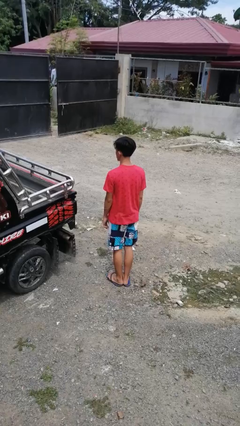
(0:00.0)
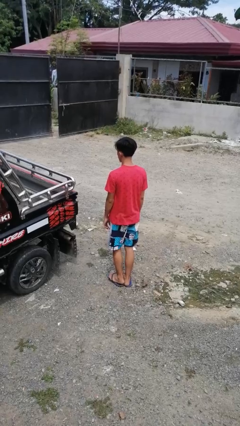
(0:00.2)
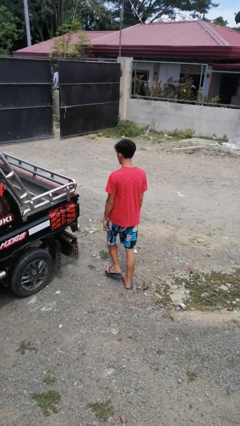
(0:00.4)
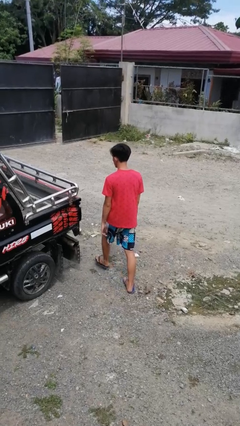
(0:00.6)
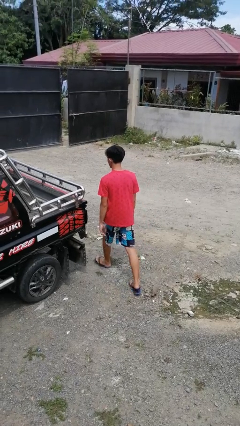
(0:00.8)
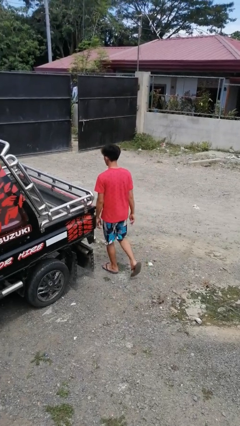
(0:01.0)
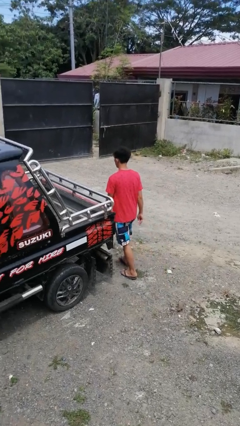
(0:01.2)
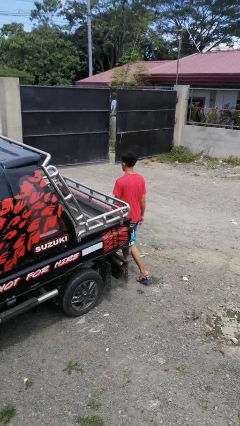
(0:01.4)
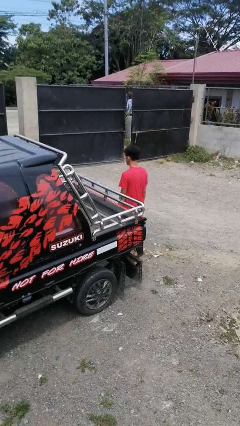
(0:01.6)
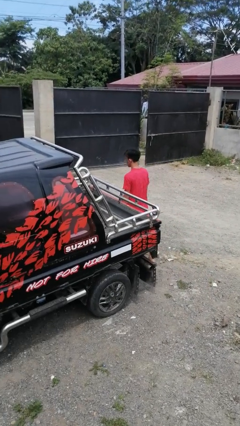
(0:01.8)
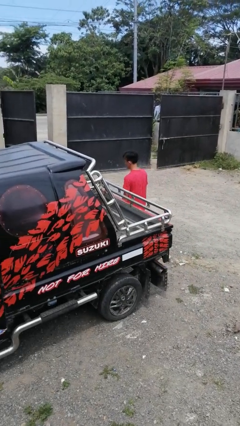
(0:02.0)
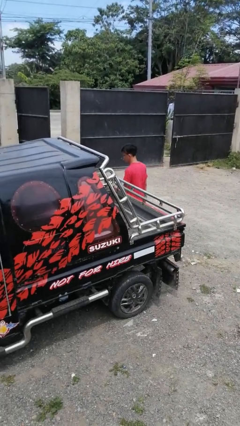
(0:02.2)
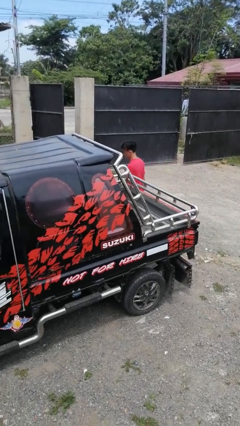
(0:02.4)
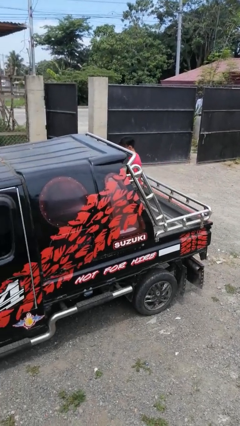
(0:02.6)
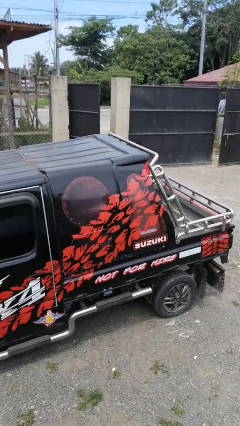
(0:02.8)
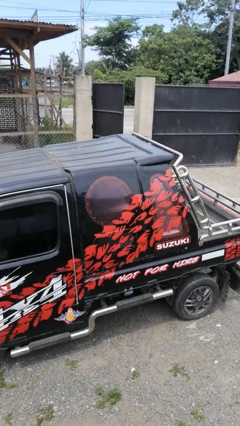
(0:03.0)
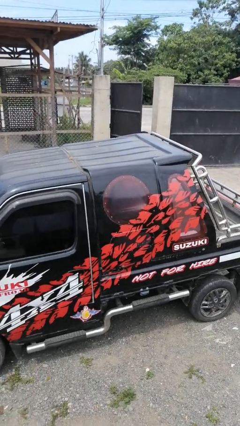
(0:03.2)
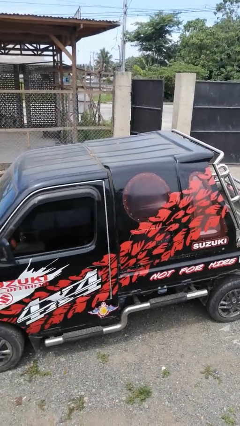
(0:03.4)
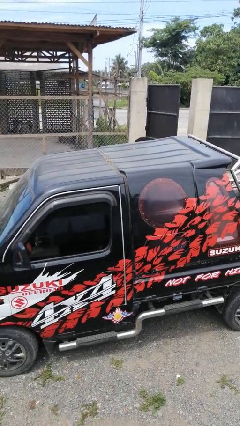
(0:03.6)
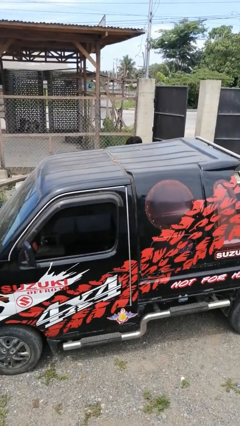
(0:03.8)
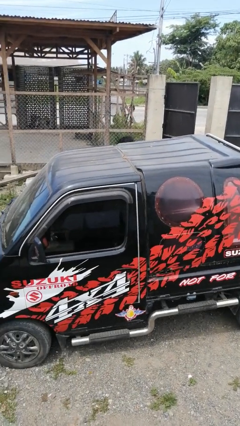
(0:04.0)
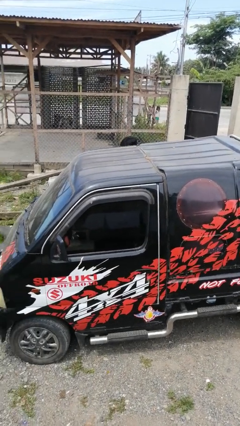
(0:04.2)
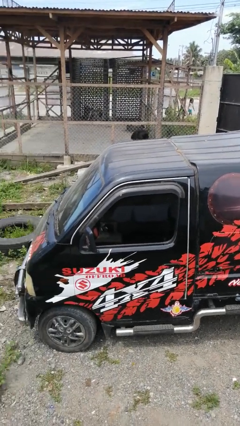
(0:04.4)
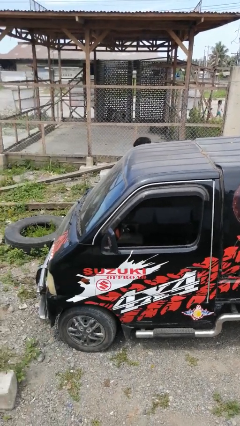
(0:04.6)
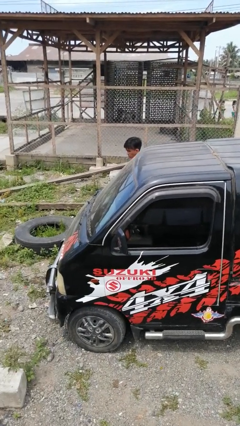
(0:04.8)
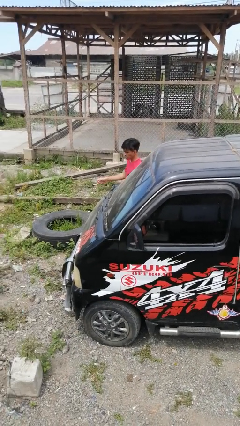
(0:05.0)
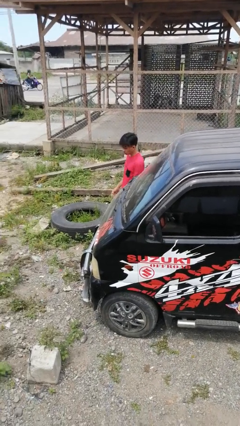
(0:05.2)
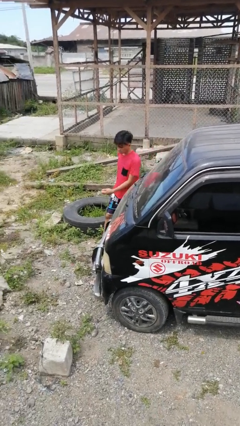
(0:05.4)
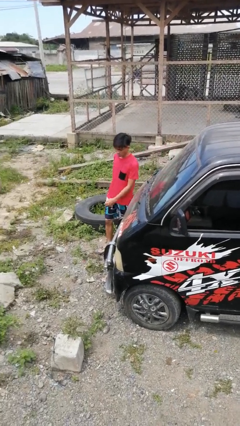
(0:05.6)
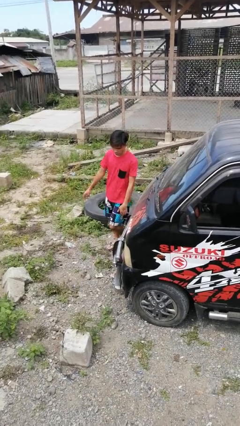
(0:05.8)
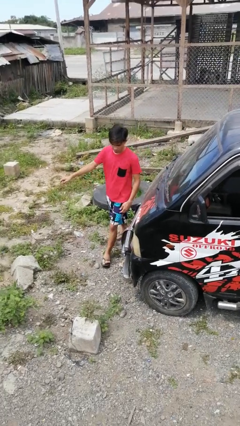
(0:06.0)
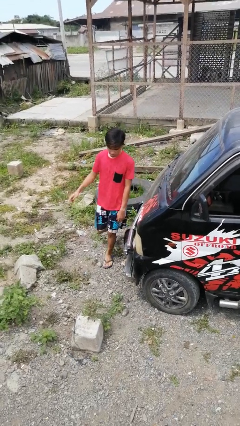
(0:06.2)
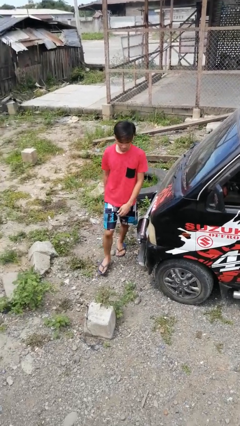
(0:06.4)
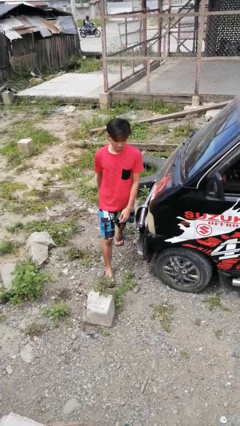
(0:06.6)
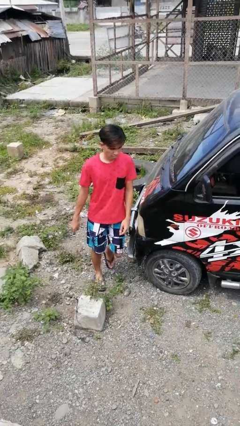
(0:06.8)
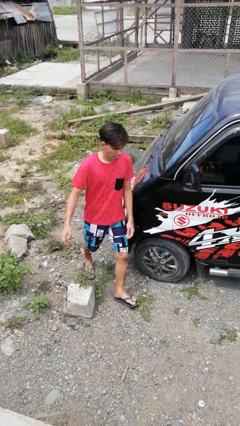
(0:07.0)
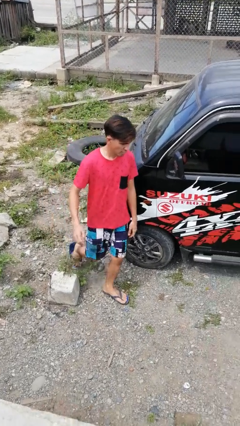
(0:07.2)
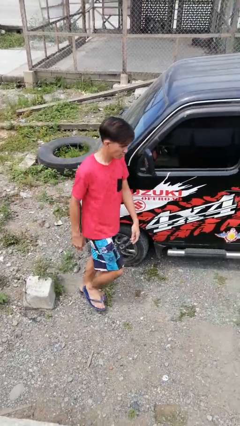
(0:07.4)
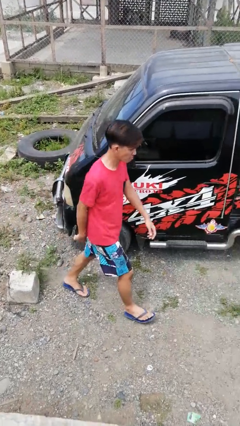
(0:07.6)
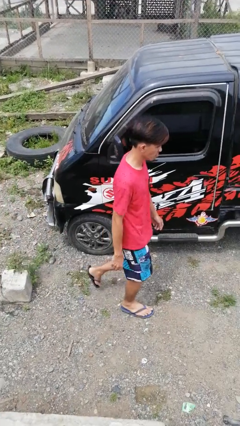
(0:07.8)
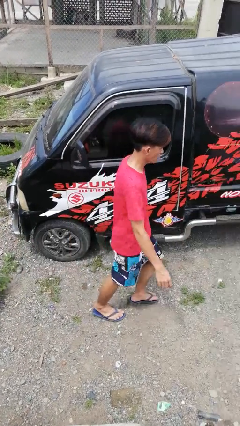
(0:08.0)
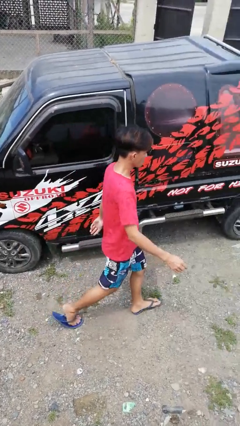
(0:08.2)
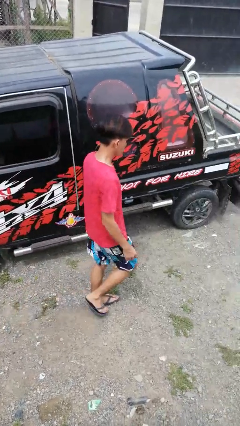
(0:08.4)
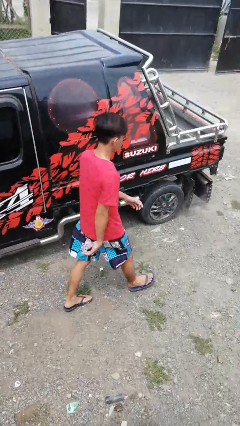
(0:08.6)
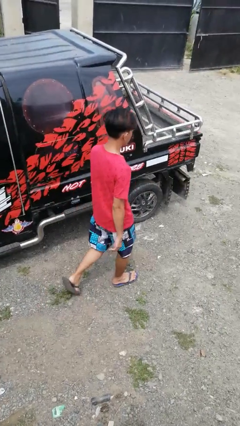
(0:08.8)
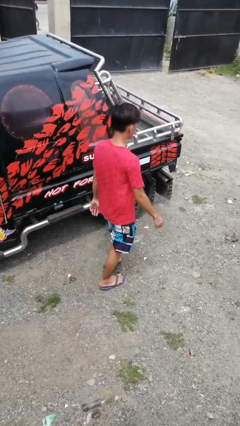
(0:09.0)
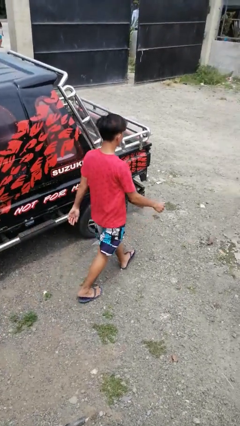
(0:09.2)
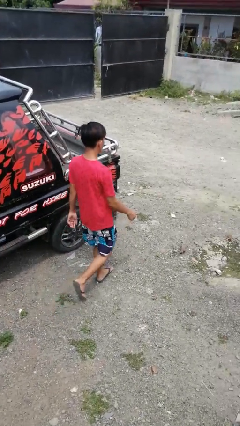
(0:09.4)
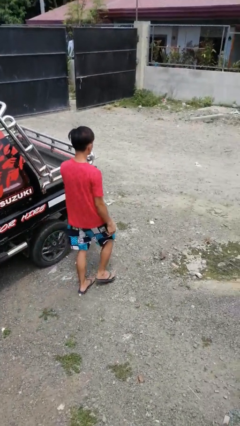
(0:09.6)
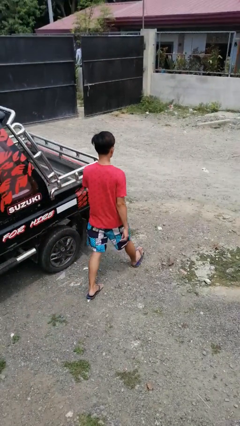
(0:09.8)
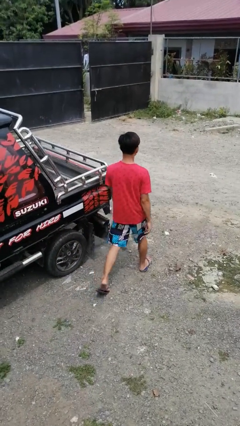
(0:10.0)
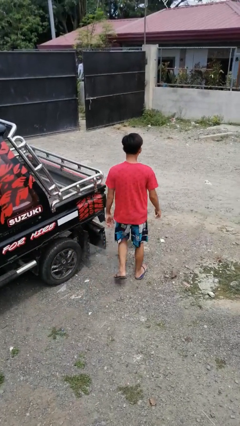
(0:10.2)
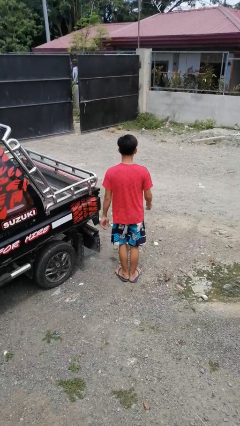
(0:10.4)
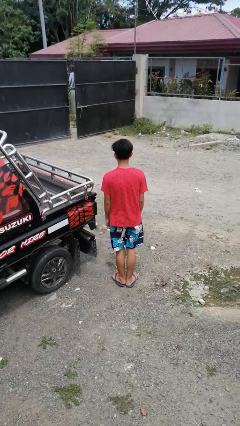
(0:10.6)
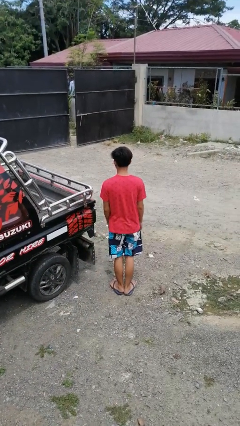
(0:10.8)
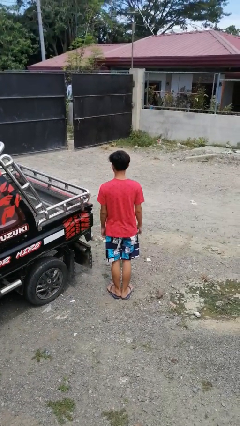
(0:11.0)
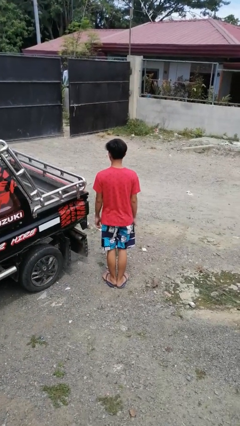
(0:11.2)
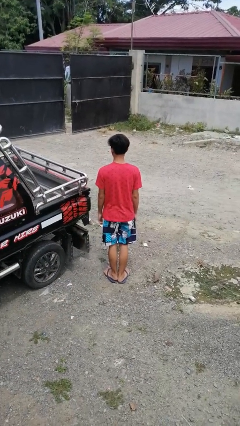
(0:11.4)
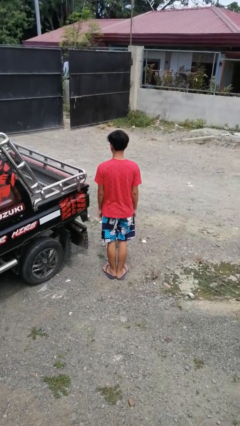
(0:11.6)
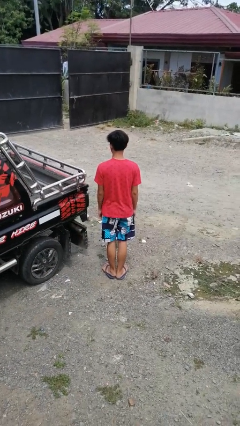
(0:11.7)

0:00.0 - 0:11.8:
person walks around car

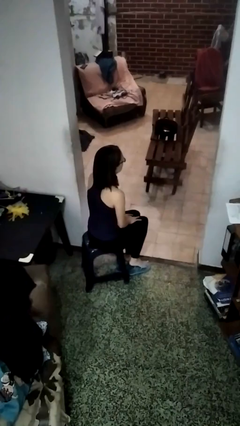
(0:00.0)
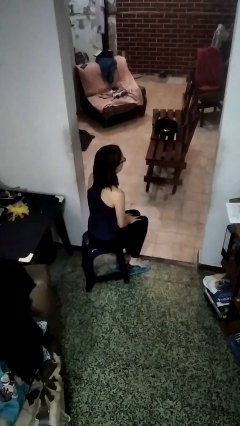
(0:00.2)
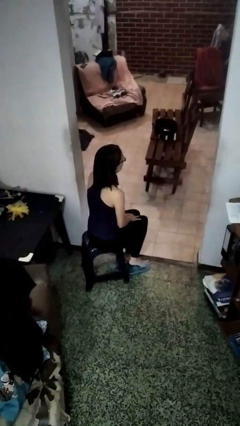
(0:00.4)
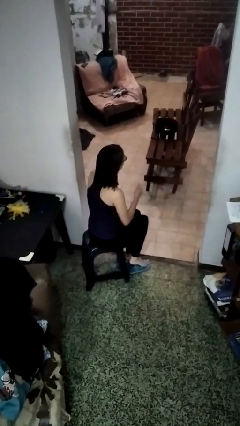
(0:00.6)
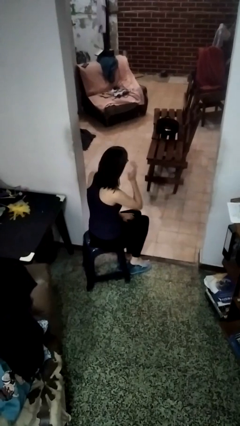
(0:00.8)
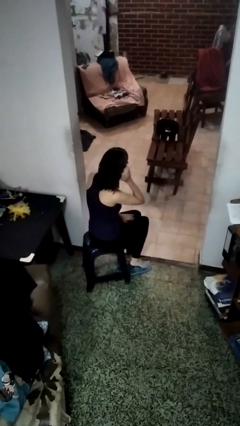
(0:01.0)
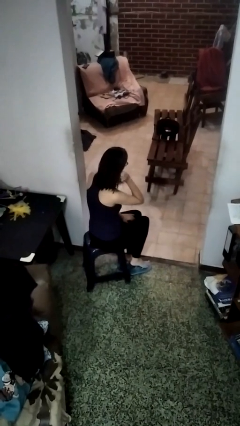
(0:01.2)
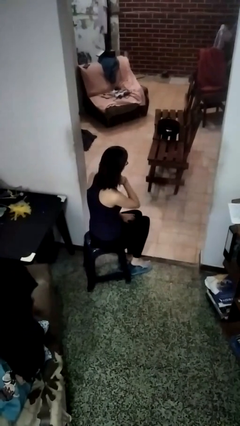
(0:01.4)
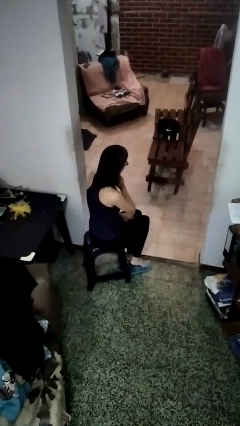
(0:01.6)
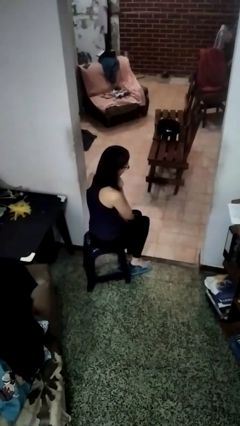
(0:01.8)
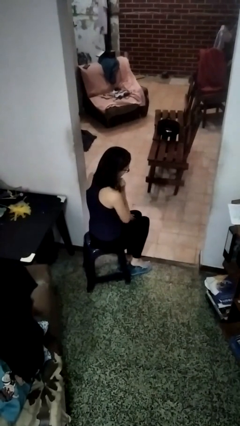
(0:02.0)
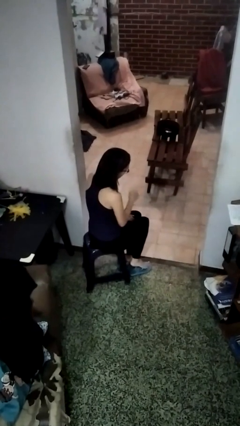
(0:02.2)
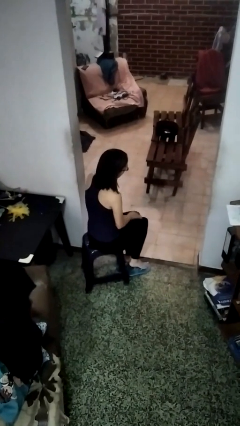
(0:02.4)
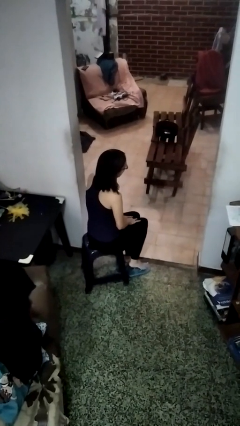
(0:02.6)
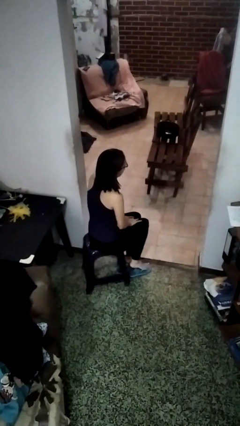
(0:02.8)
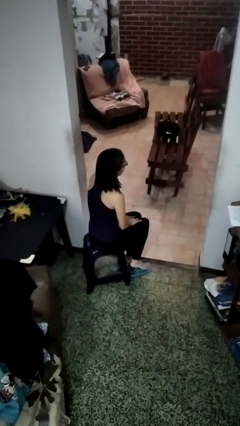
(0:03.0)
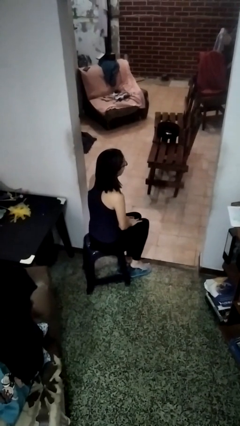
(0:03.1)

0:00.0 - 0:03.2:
person strokes hair

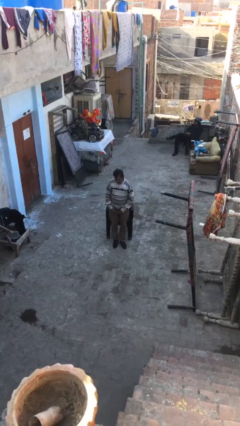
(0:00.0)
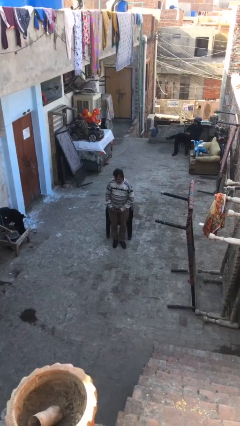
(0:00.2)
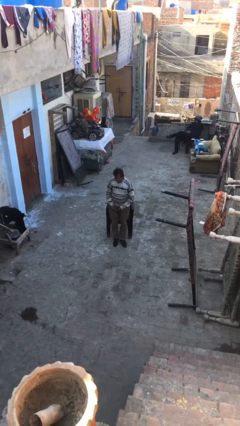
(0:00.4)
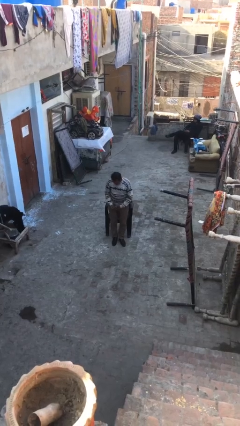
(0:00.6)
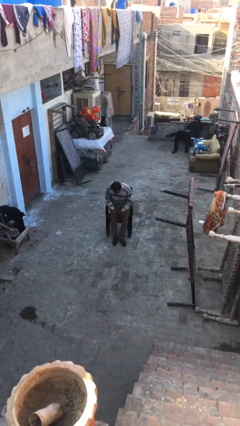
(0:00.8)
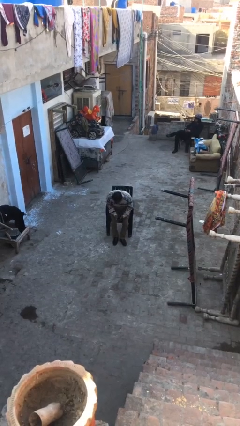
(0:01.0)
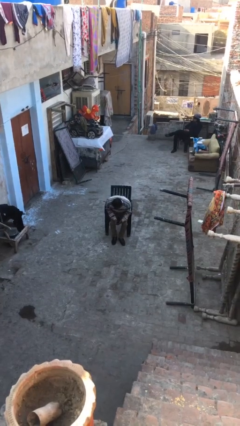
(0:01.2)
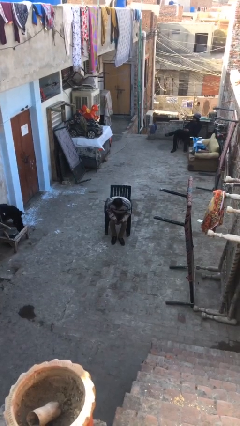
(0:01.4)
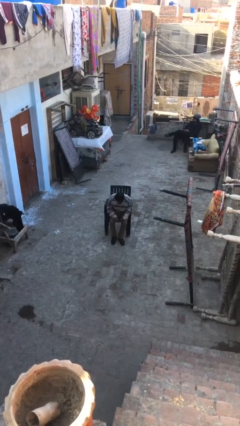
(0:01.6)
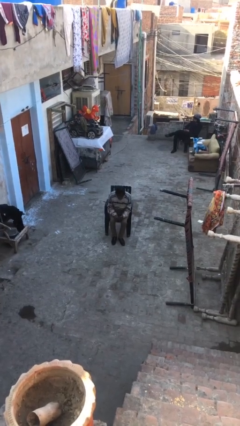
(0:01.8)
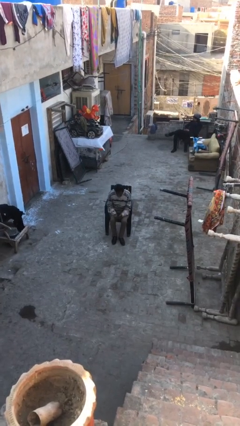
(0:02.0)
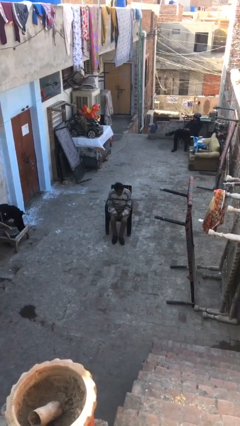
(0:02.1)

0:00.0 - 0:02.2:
person sits down

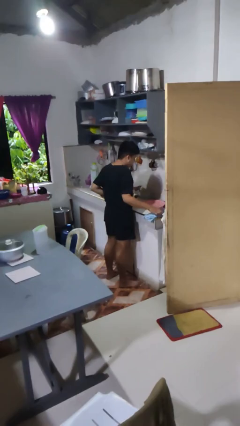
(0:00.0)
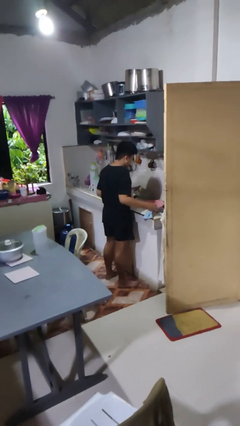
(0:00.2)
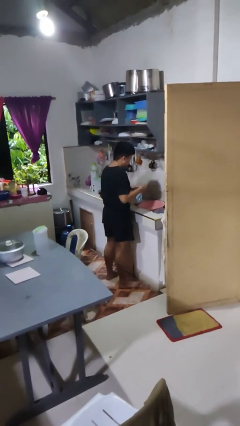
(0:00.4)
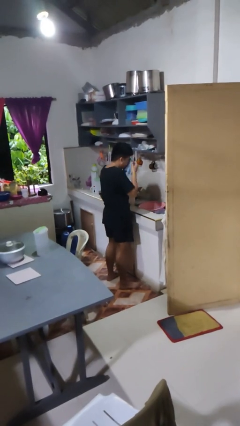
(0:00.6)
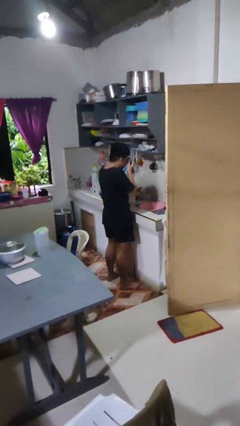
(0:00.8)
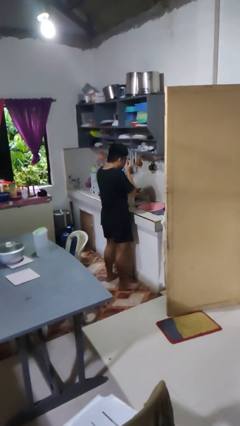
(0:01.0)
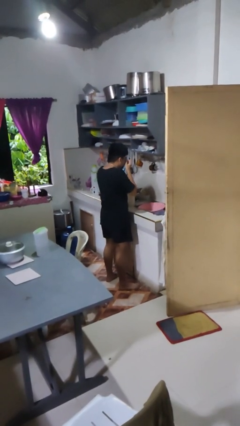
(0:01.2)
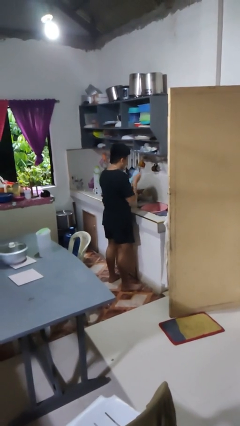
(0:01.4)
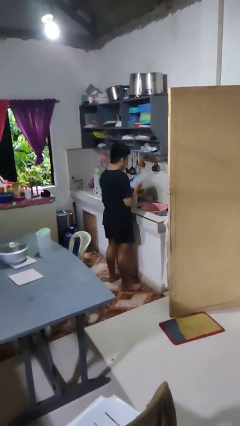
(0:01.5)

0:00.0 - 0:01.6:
person dries face with towel
